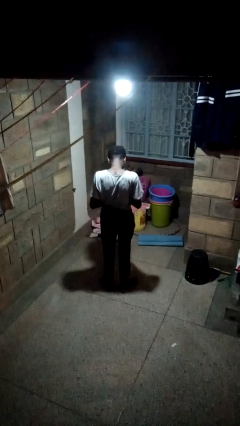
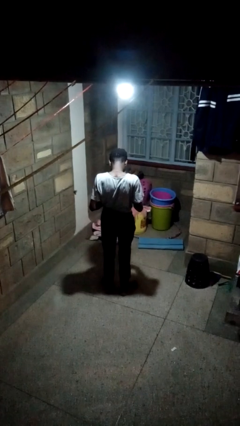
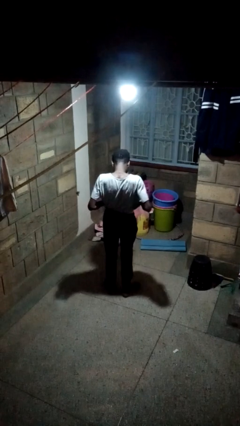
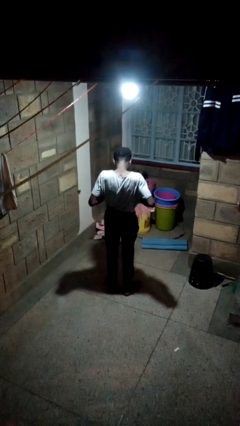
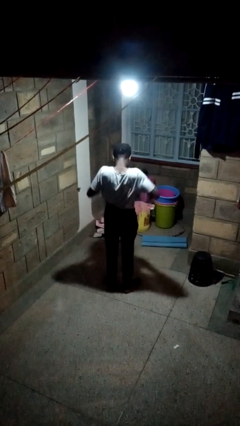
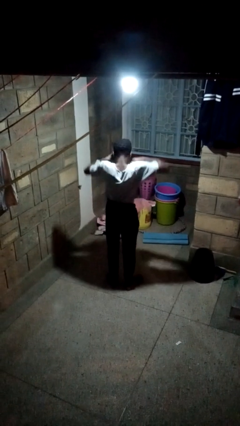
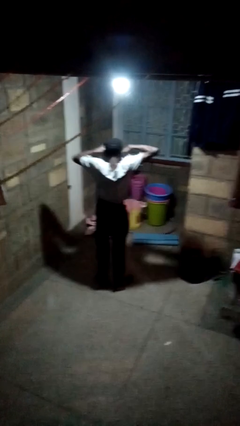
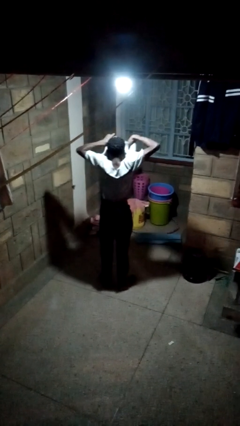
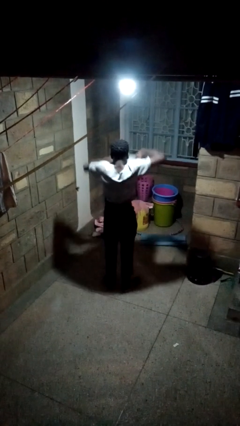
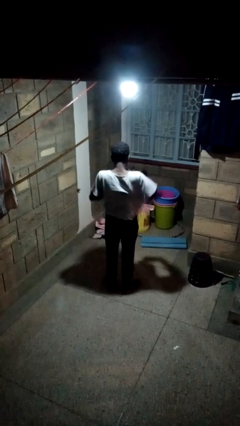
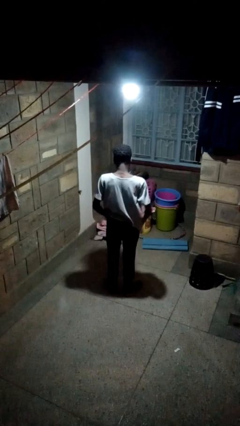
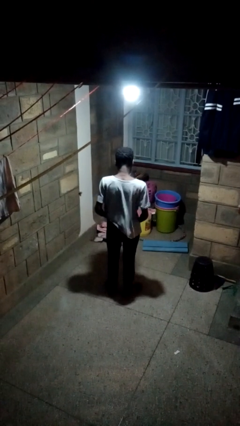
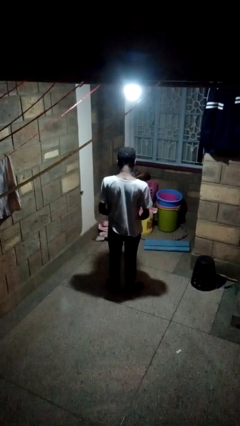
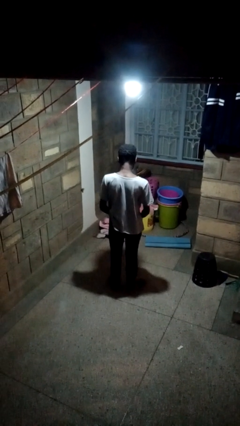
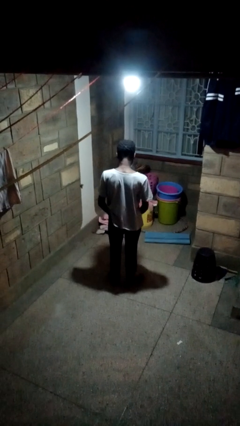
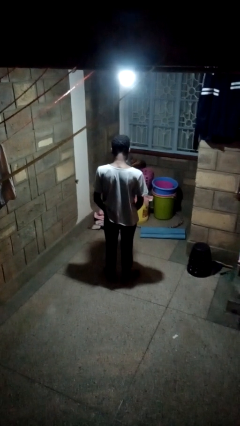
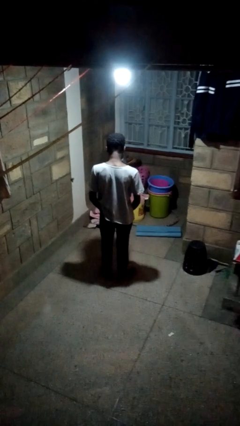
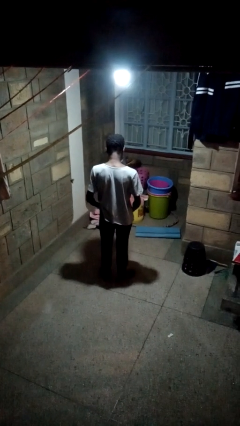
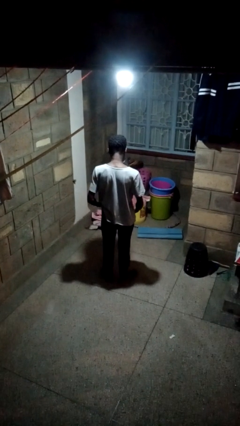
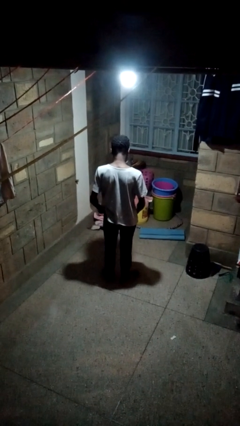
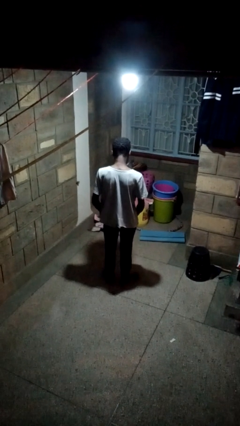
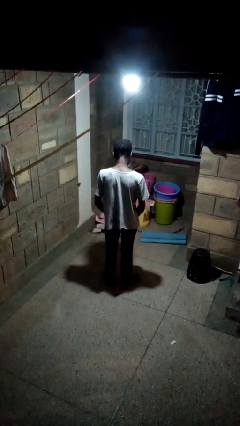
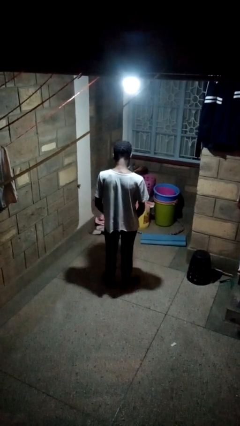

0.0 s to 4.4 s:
person untucks shirt

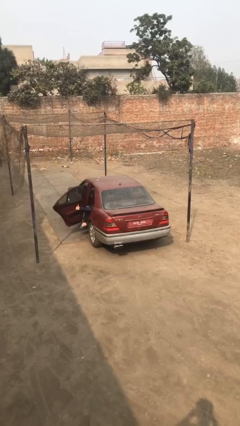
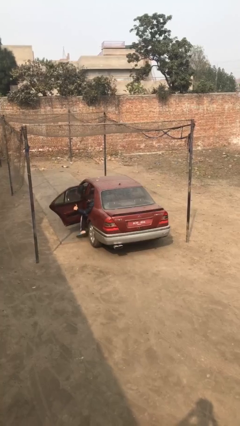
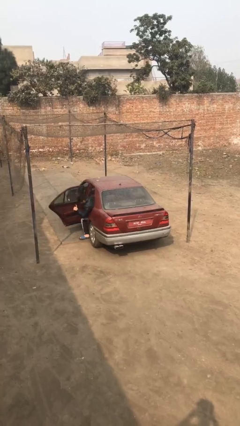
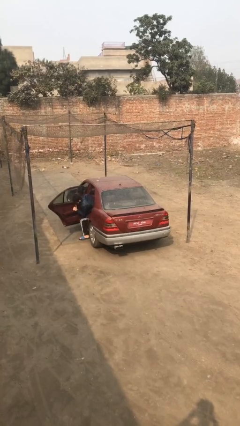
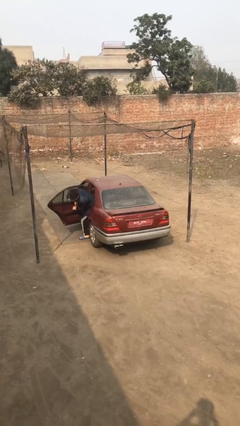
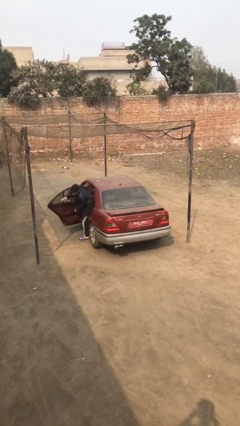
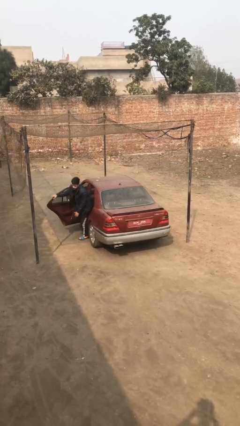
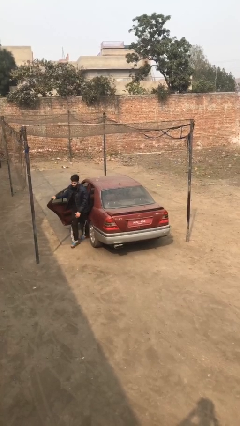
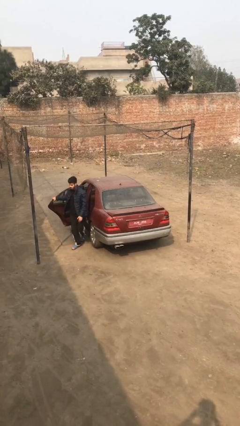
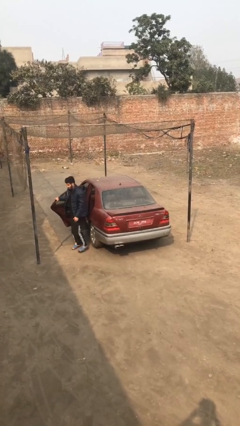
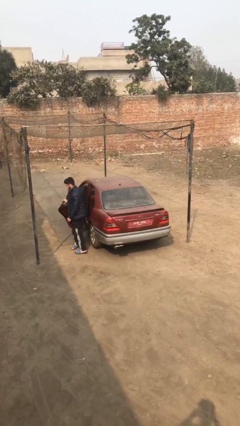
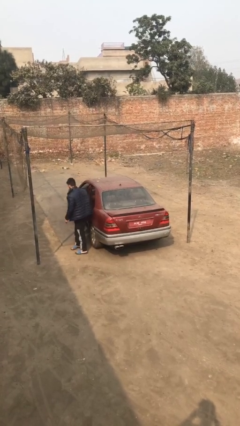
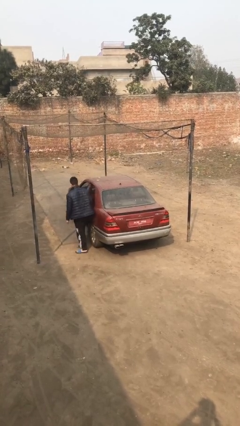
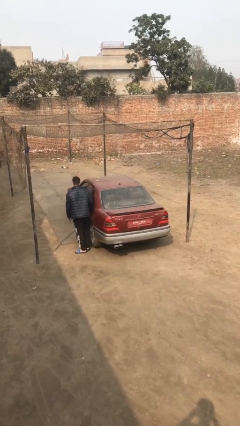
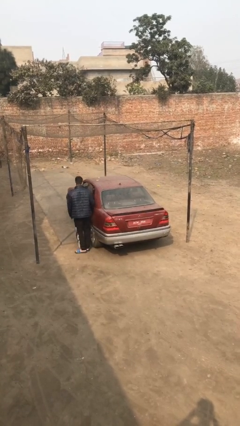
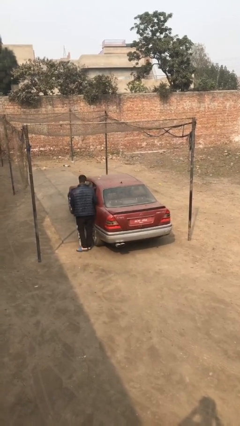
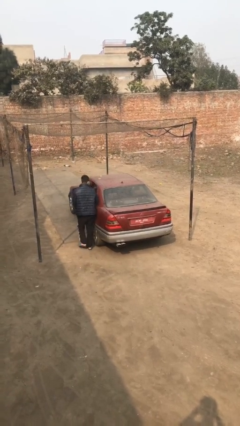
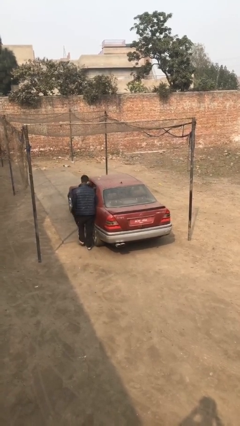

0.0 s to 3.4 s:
car drops off person

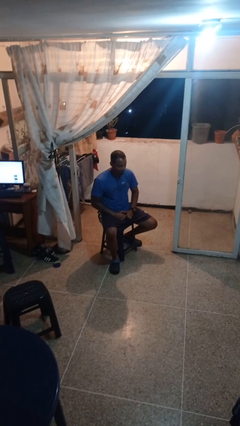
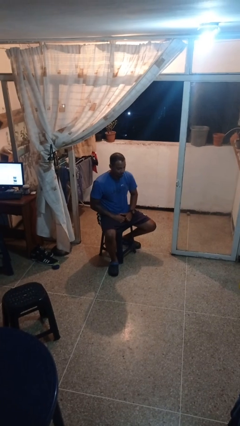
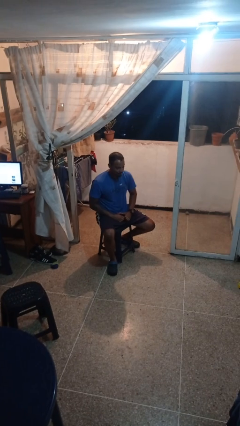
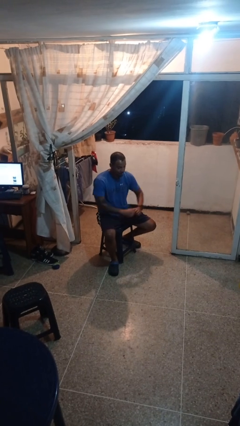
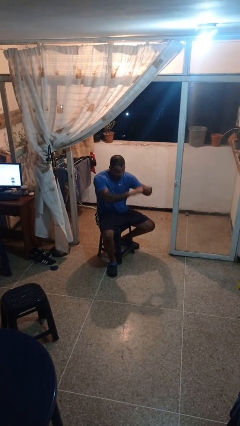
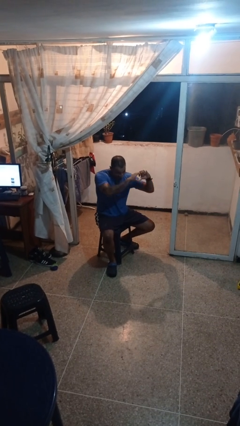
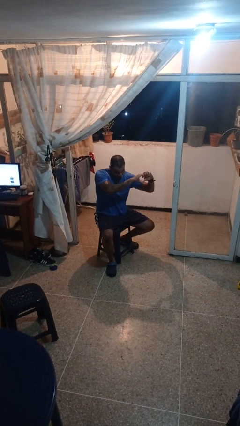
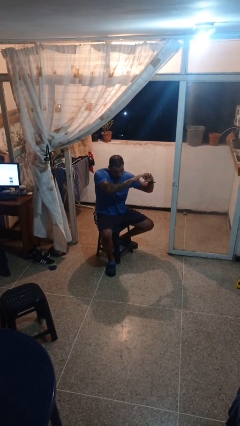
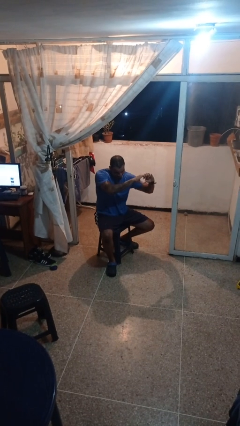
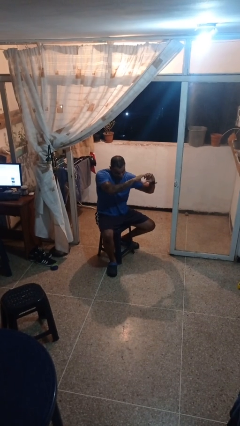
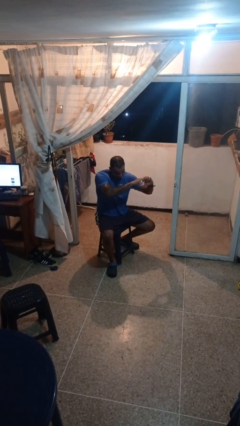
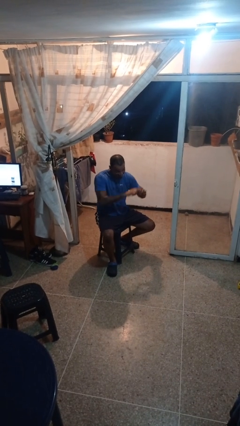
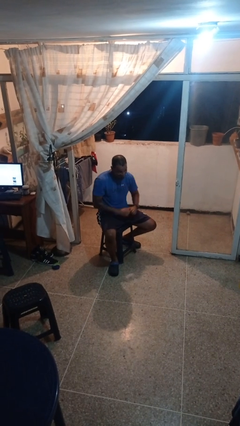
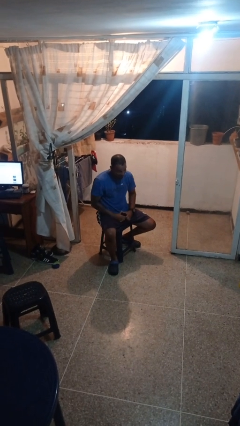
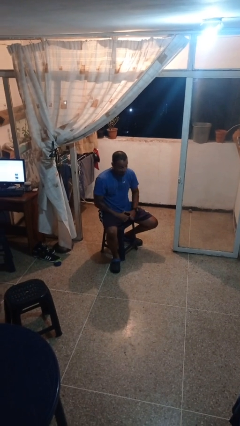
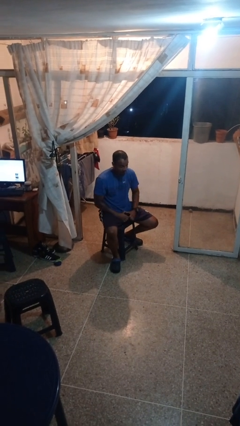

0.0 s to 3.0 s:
person gestures heart

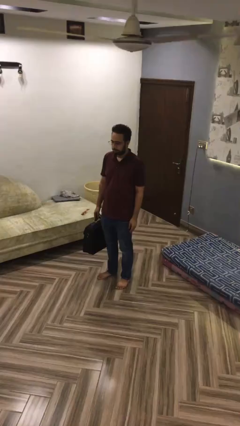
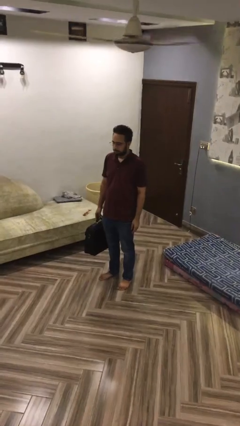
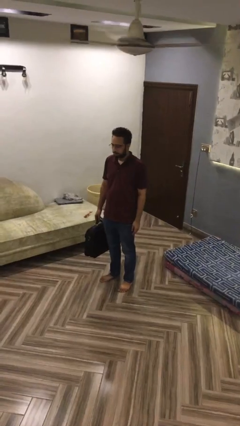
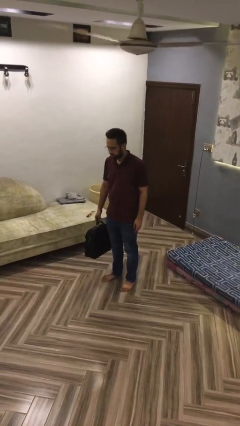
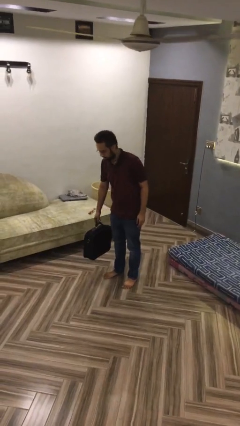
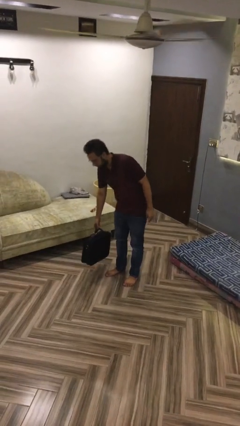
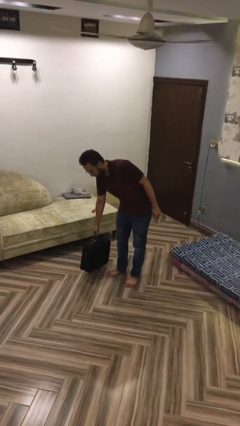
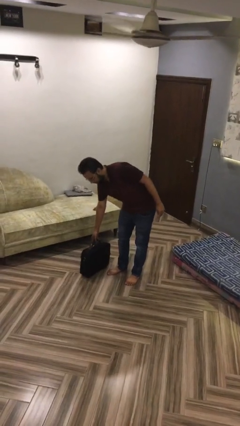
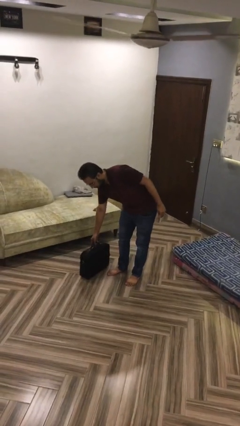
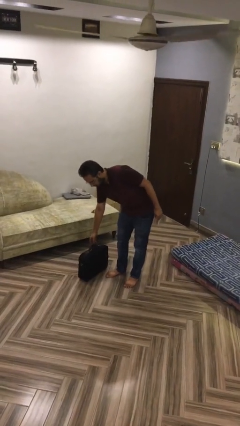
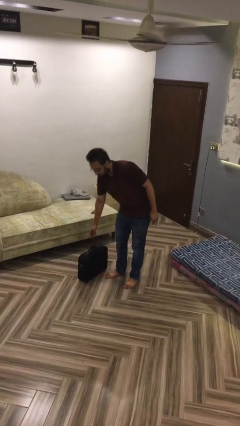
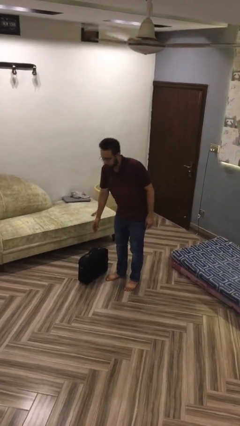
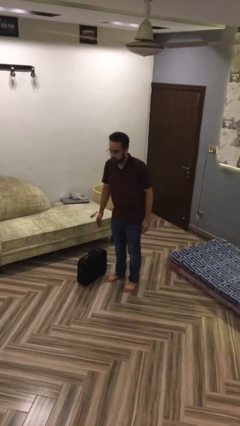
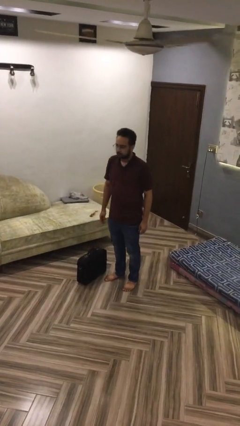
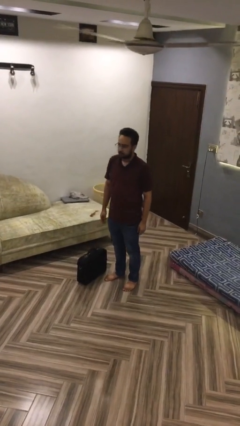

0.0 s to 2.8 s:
person puts down object on floor

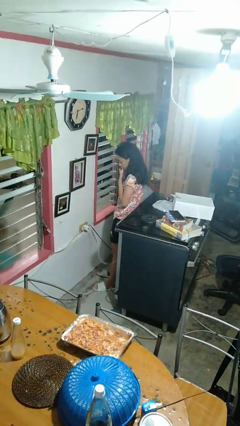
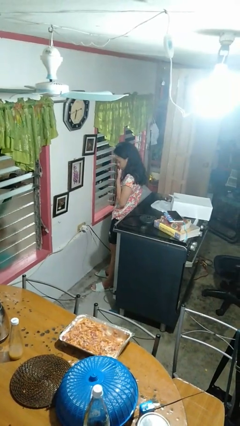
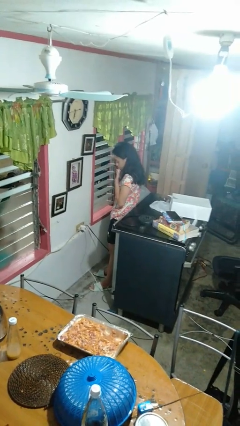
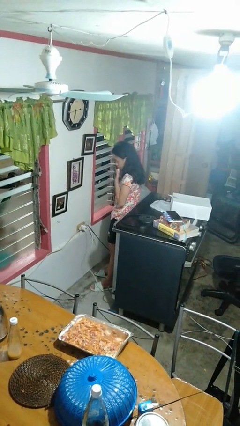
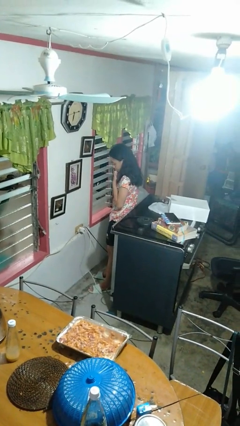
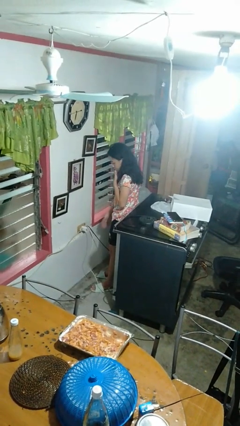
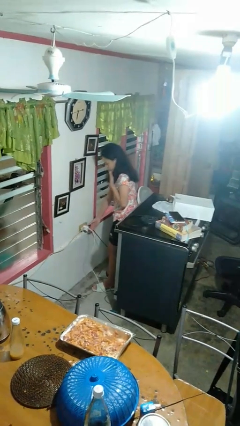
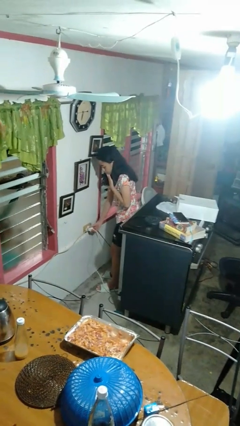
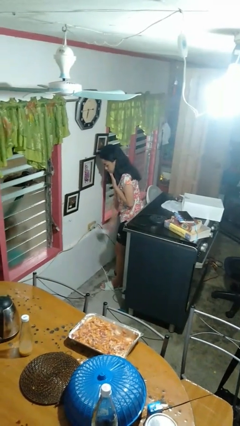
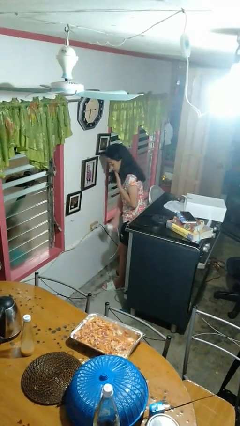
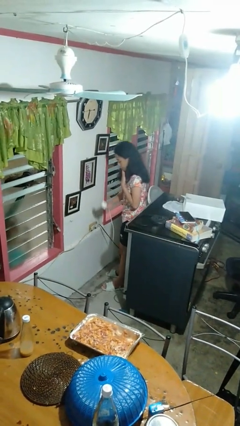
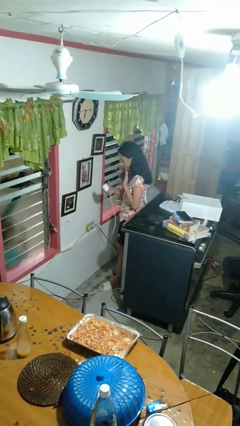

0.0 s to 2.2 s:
person unplugs from electrical socket

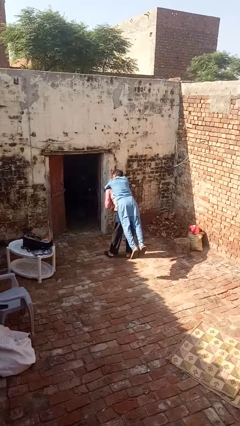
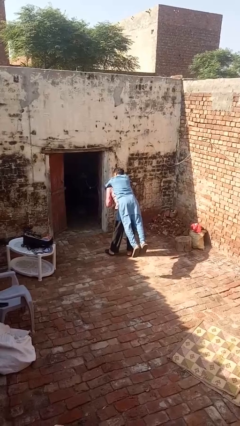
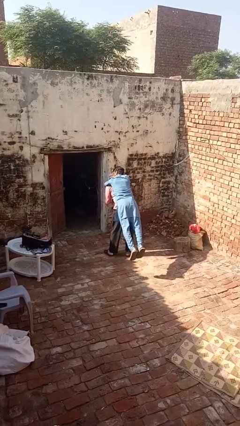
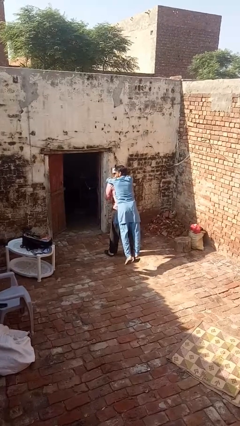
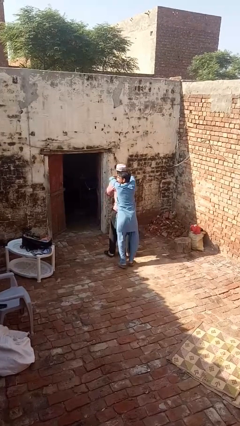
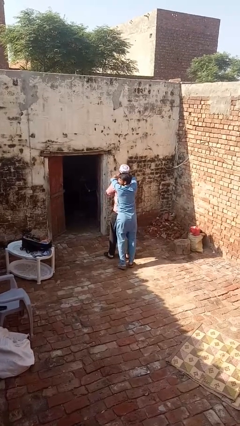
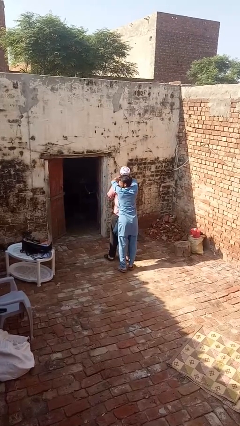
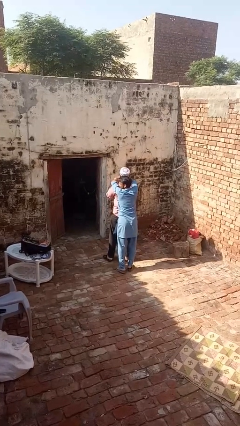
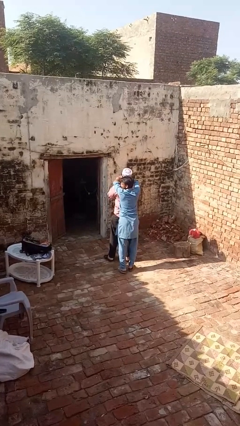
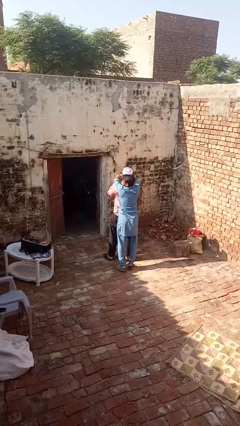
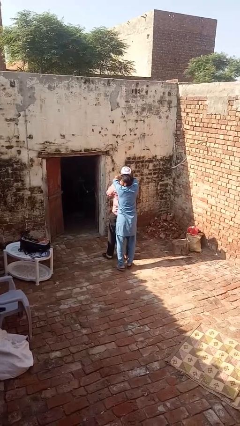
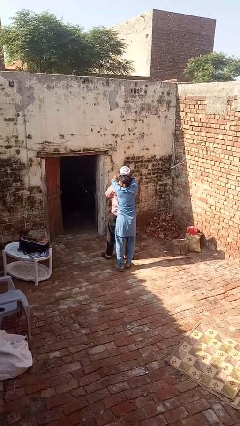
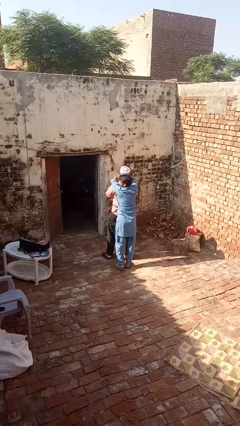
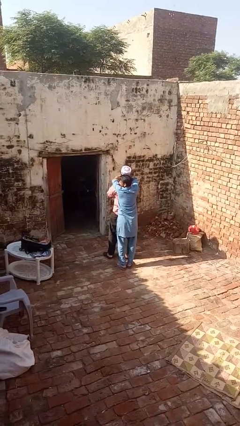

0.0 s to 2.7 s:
person puts down person
